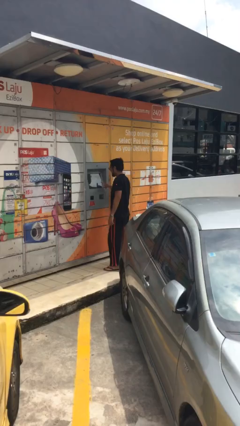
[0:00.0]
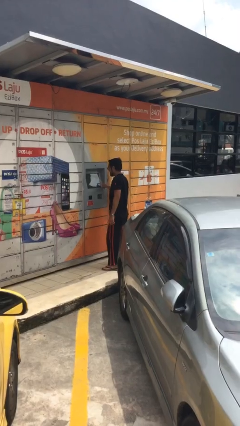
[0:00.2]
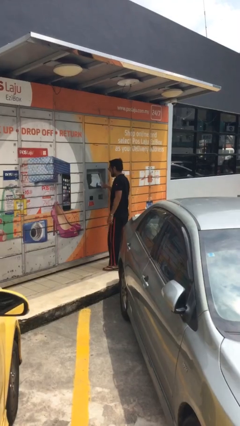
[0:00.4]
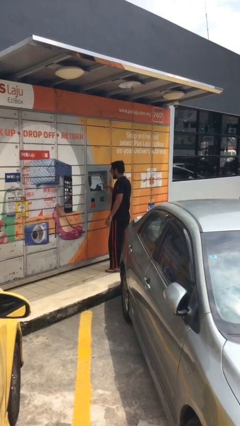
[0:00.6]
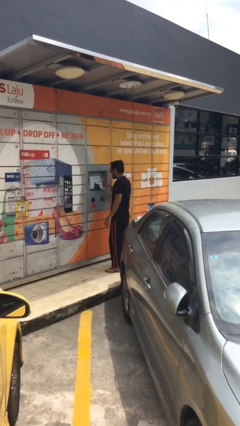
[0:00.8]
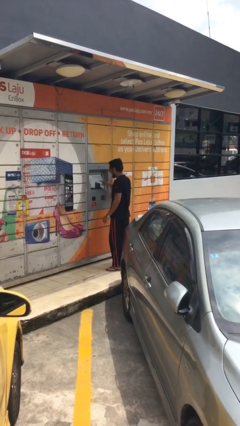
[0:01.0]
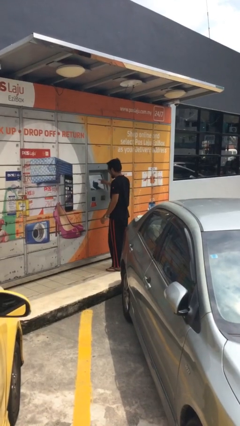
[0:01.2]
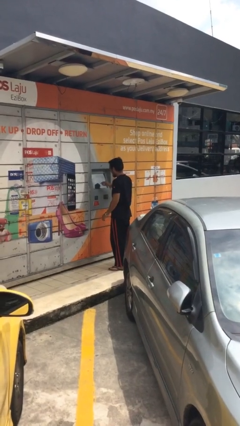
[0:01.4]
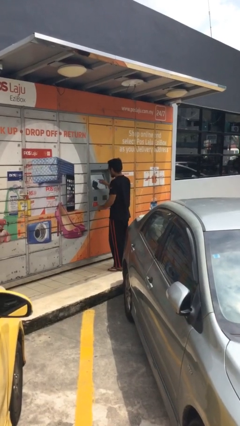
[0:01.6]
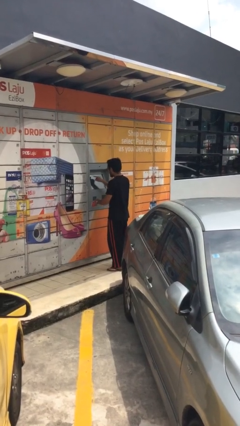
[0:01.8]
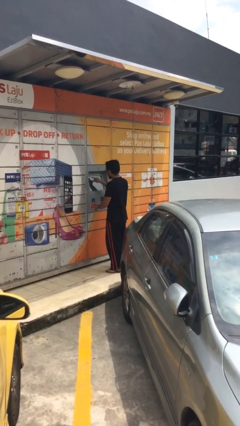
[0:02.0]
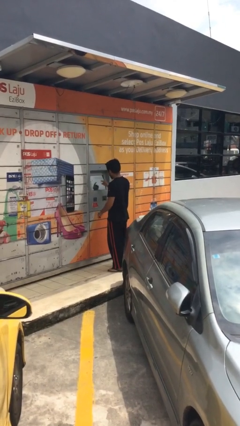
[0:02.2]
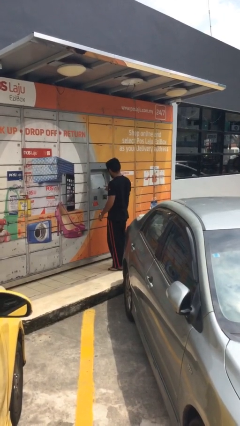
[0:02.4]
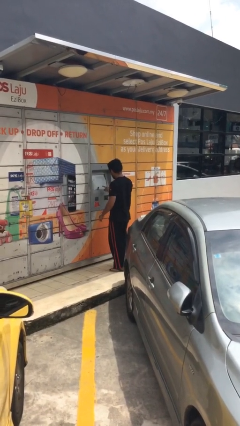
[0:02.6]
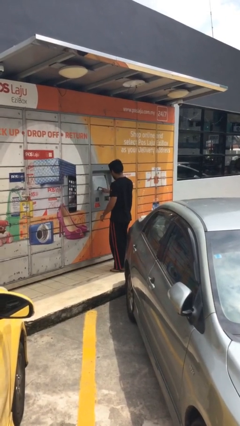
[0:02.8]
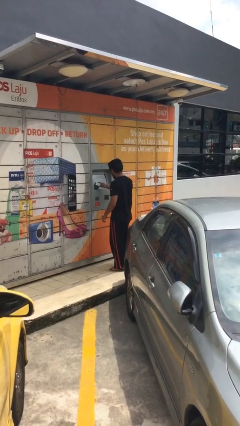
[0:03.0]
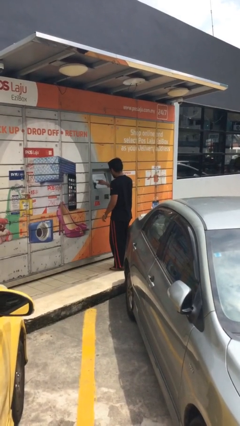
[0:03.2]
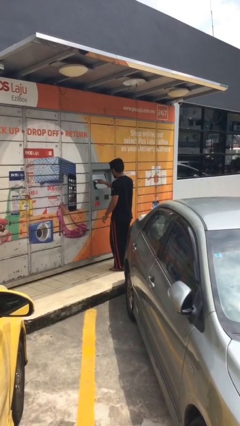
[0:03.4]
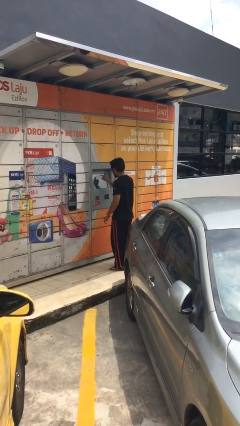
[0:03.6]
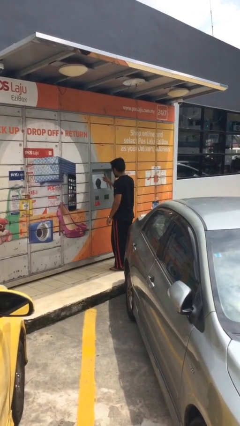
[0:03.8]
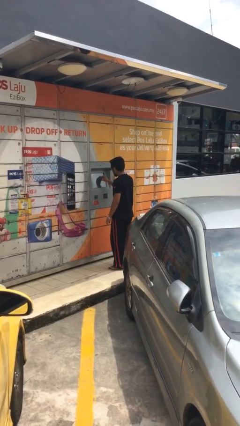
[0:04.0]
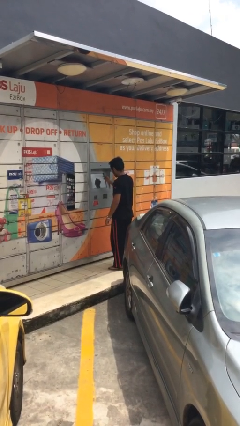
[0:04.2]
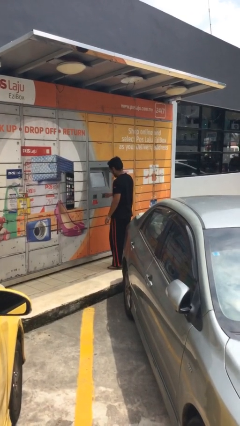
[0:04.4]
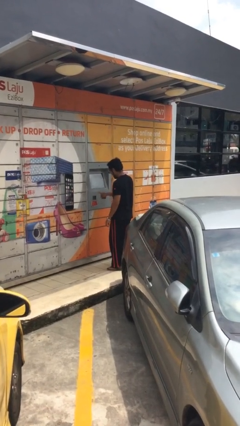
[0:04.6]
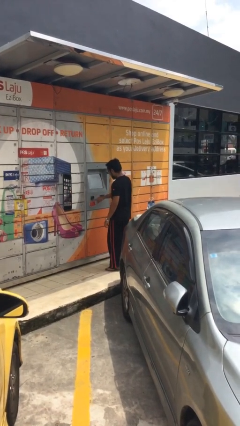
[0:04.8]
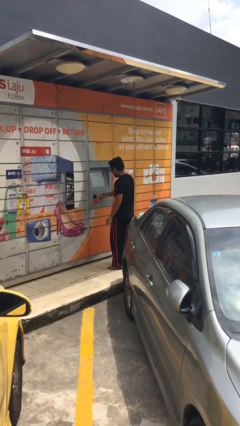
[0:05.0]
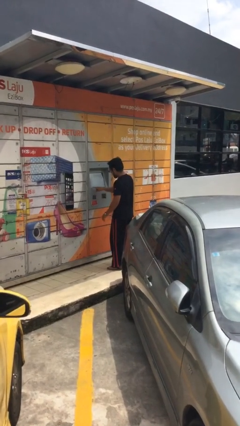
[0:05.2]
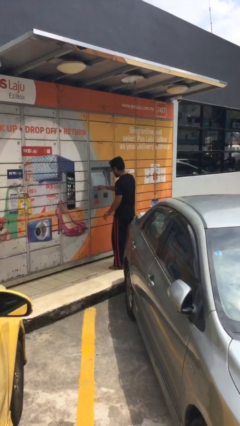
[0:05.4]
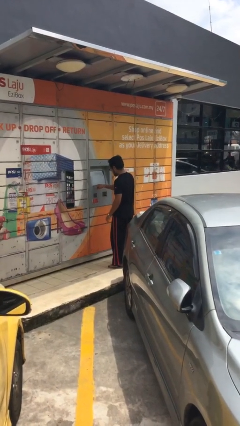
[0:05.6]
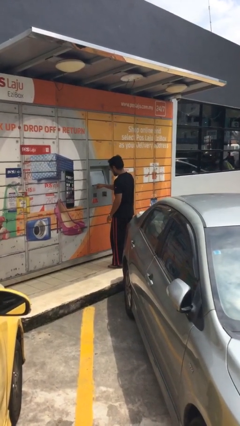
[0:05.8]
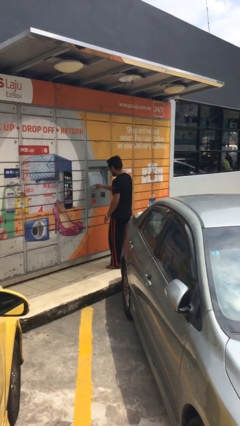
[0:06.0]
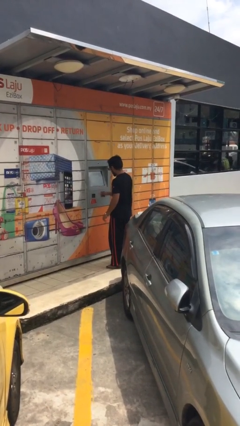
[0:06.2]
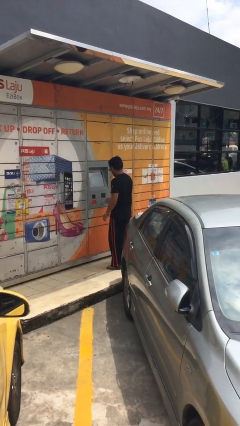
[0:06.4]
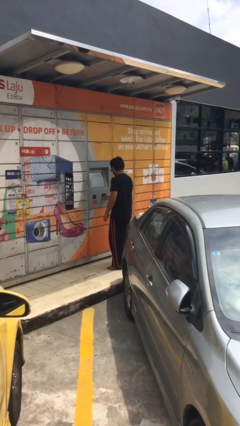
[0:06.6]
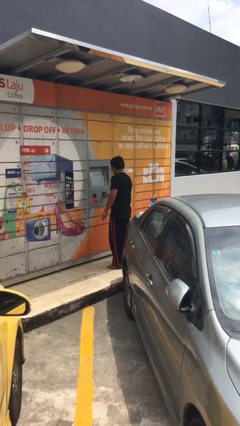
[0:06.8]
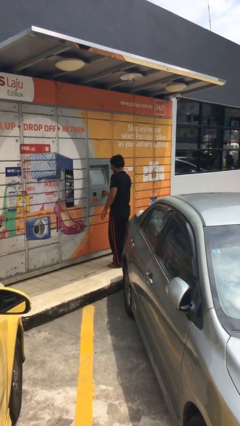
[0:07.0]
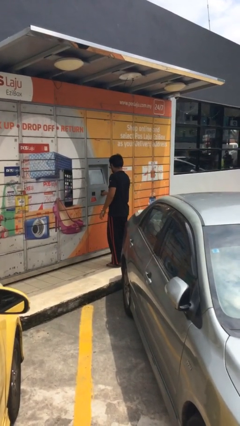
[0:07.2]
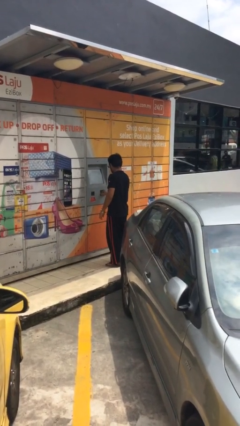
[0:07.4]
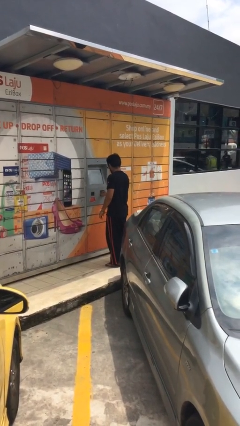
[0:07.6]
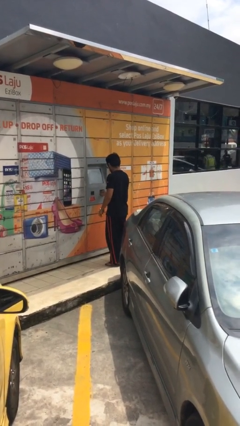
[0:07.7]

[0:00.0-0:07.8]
person purchases from machine

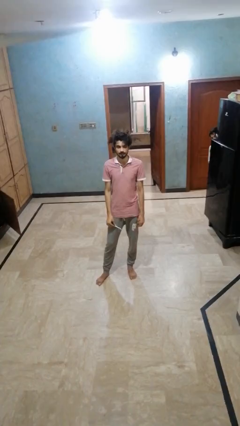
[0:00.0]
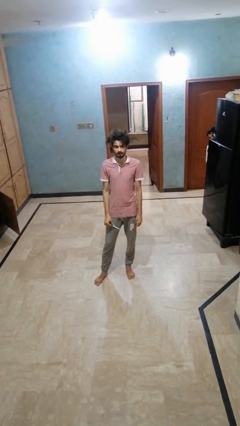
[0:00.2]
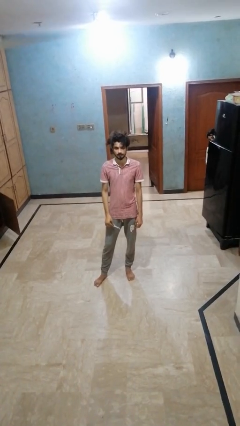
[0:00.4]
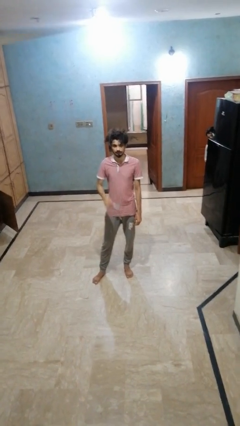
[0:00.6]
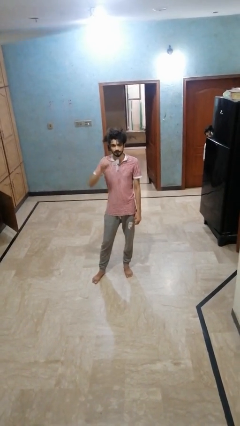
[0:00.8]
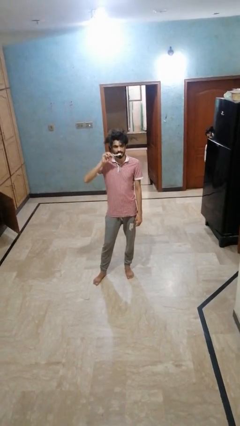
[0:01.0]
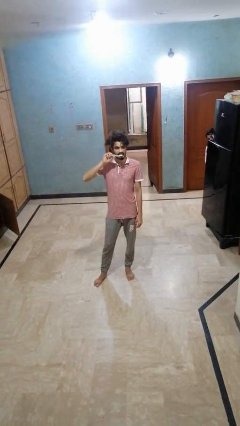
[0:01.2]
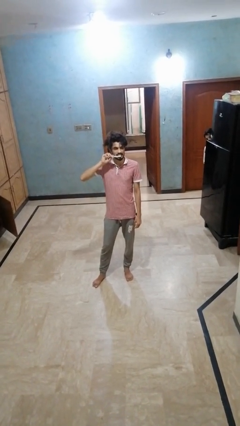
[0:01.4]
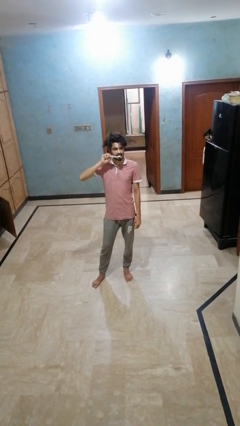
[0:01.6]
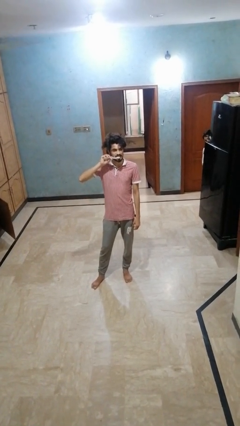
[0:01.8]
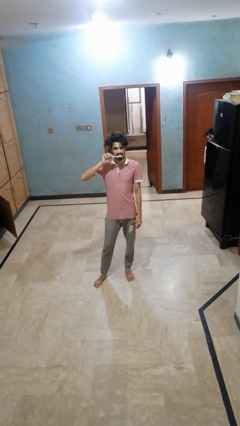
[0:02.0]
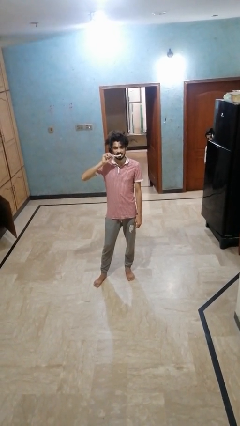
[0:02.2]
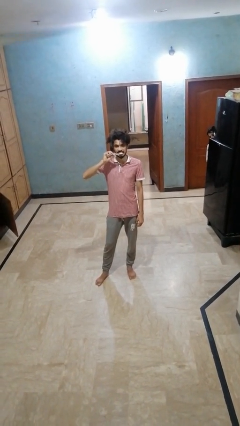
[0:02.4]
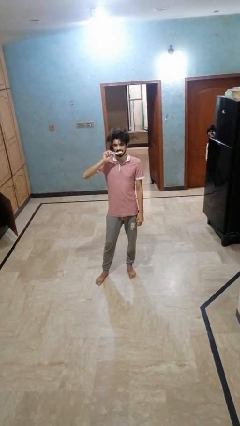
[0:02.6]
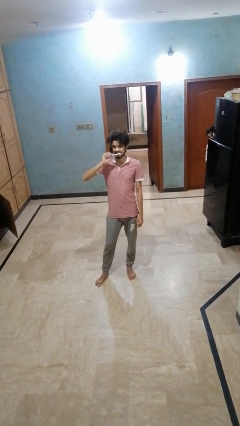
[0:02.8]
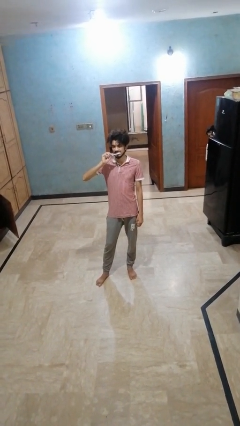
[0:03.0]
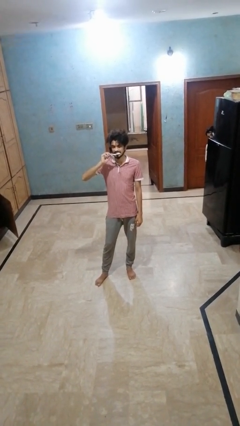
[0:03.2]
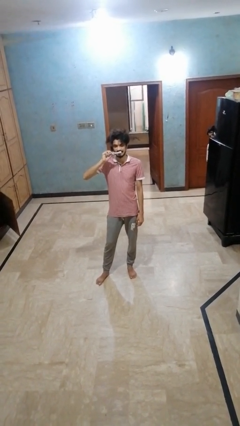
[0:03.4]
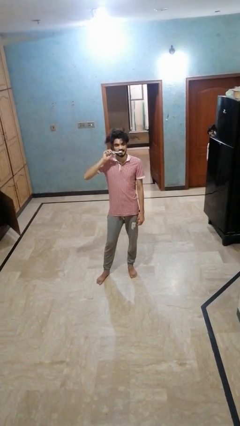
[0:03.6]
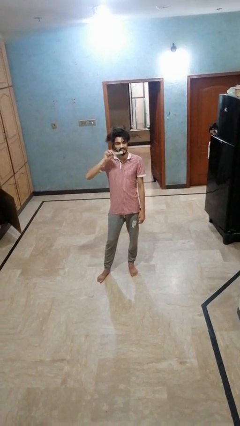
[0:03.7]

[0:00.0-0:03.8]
person brushes teeth

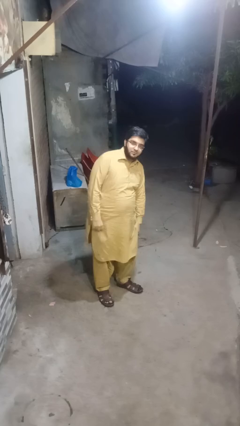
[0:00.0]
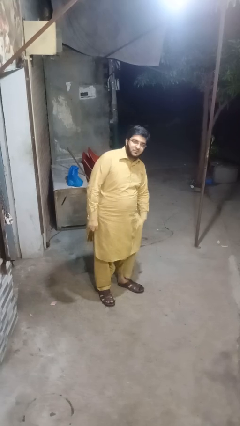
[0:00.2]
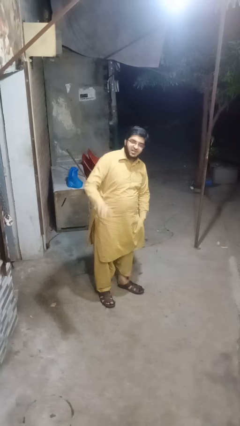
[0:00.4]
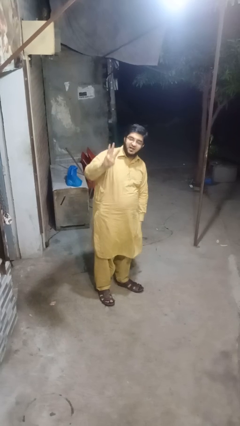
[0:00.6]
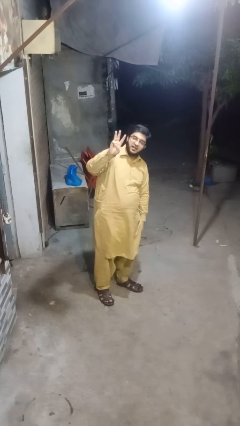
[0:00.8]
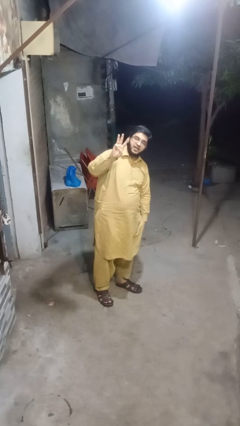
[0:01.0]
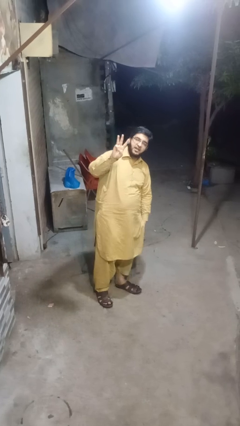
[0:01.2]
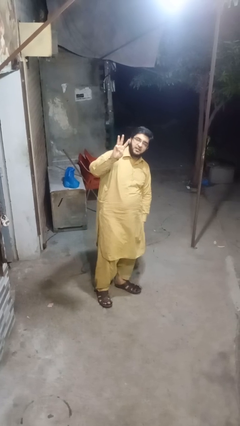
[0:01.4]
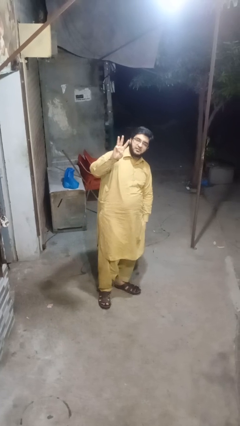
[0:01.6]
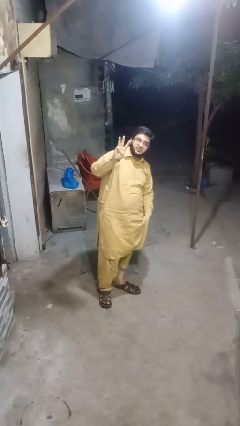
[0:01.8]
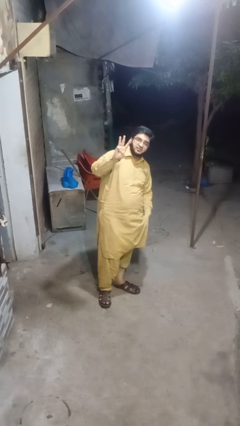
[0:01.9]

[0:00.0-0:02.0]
person gestures number three

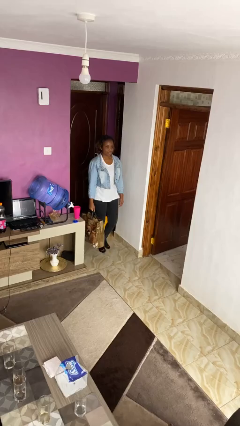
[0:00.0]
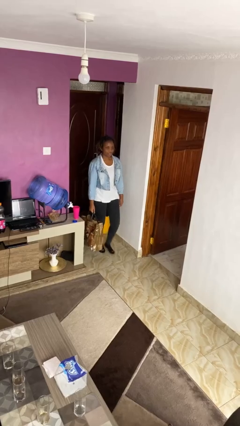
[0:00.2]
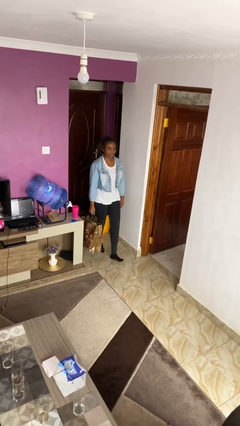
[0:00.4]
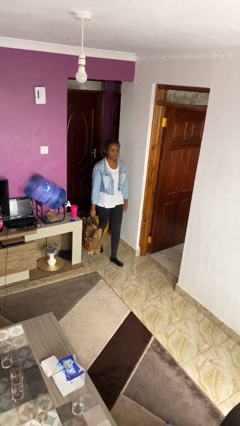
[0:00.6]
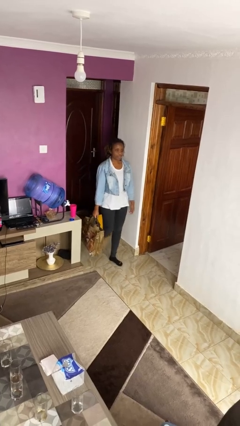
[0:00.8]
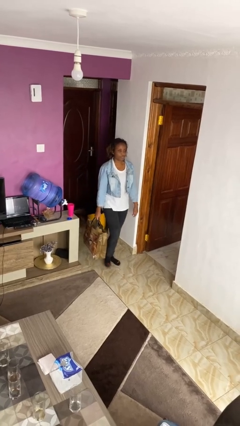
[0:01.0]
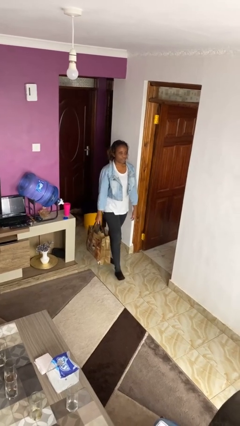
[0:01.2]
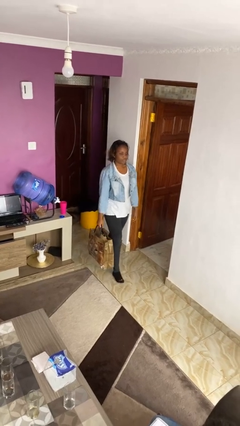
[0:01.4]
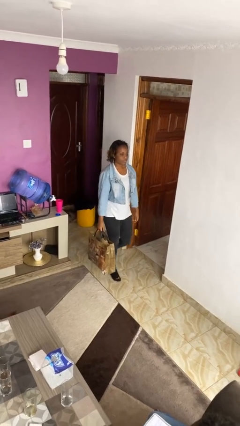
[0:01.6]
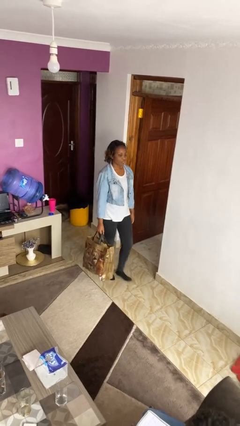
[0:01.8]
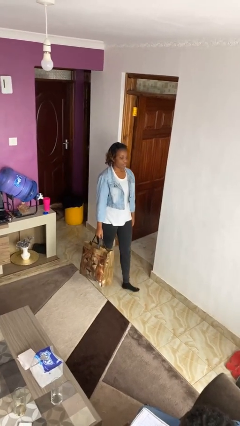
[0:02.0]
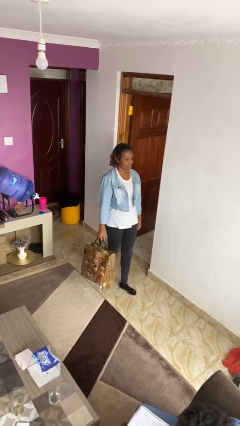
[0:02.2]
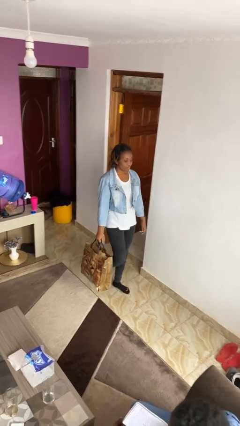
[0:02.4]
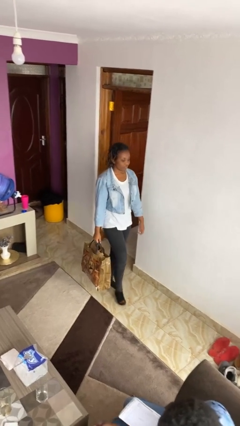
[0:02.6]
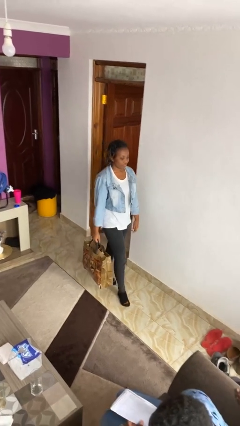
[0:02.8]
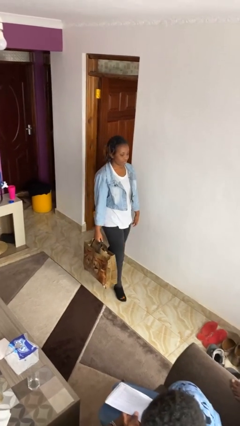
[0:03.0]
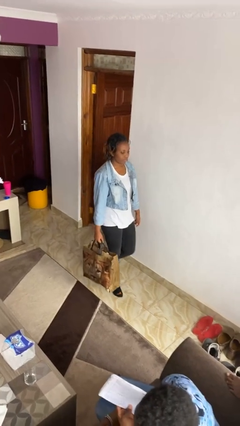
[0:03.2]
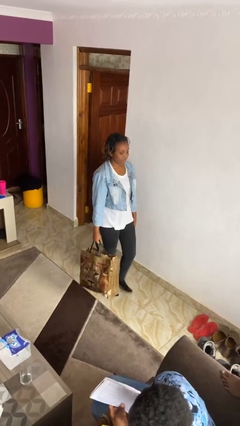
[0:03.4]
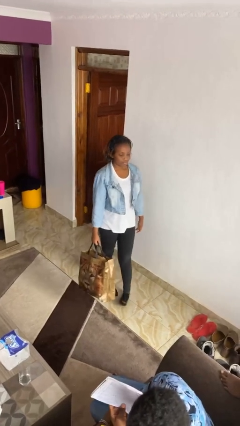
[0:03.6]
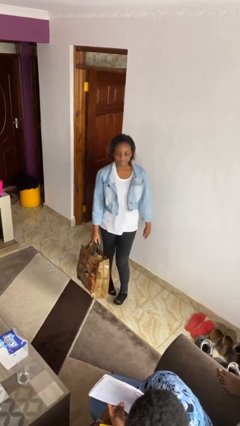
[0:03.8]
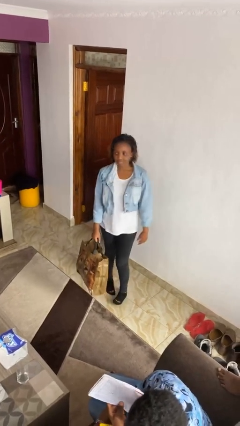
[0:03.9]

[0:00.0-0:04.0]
person carries groceries

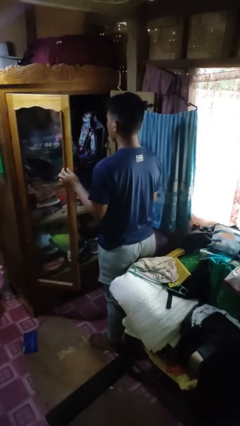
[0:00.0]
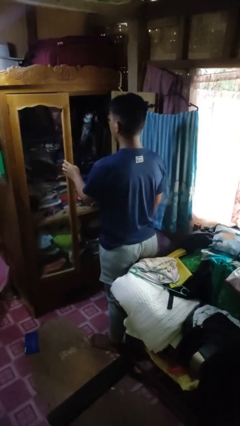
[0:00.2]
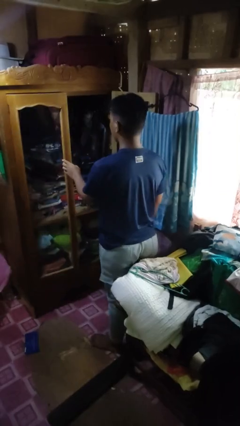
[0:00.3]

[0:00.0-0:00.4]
person closes closet door
